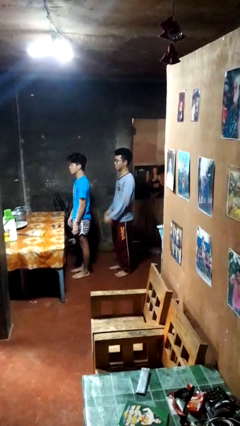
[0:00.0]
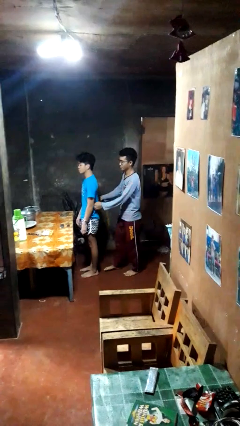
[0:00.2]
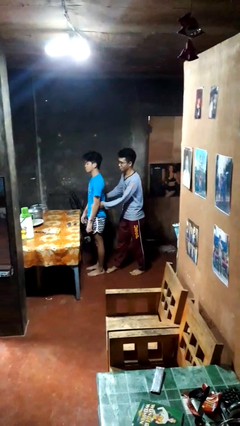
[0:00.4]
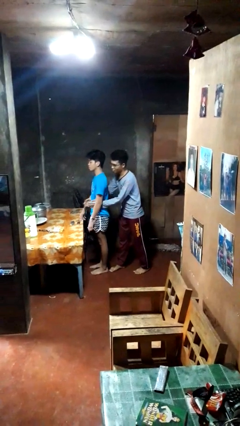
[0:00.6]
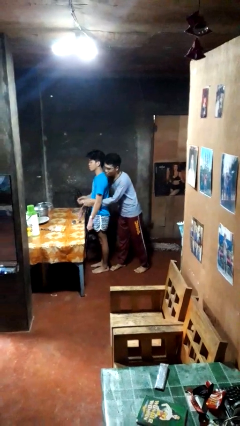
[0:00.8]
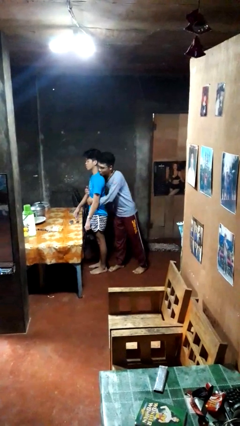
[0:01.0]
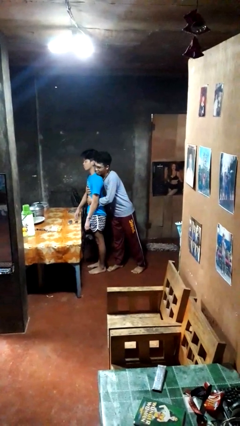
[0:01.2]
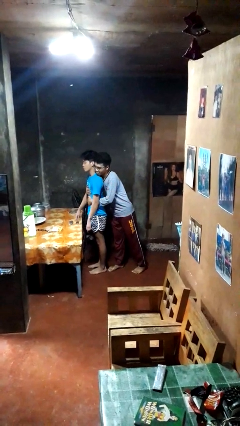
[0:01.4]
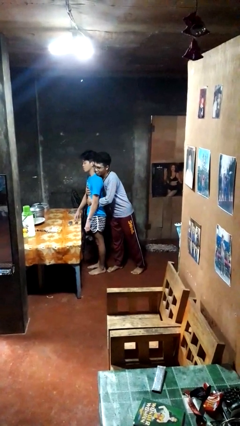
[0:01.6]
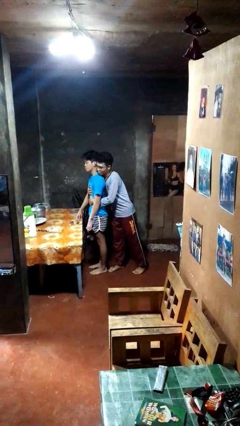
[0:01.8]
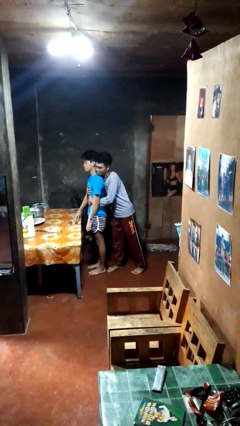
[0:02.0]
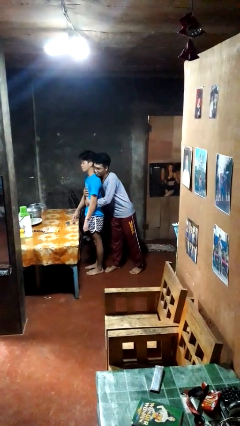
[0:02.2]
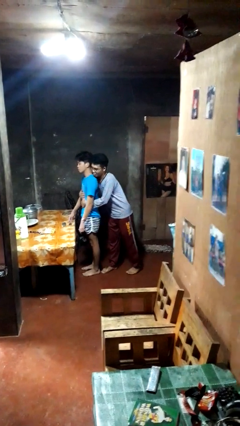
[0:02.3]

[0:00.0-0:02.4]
person hugs person from behind

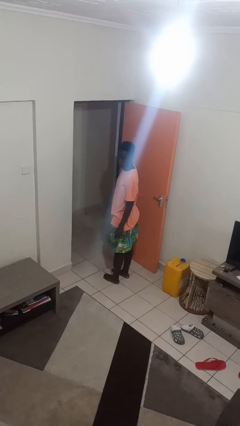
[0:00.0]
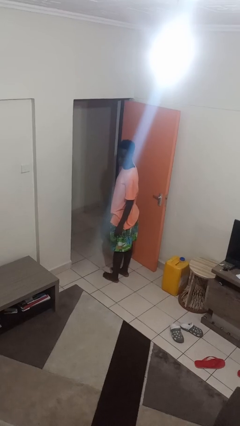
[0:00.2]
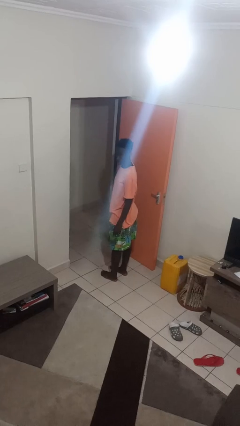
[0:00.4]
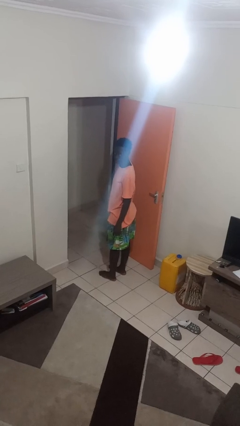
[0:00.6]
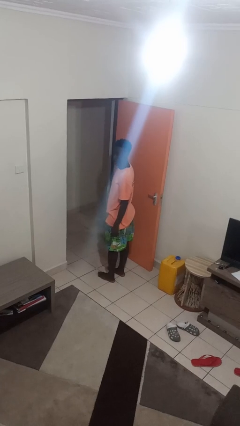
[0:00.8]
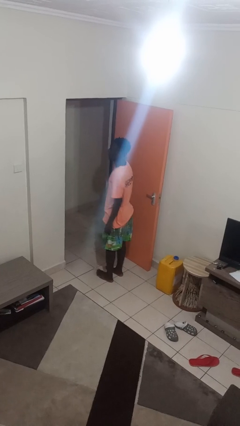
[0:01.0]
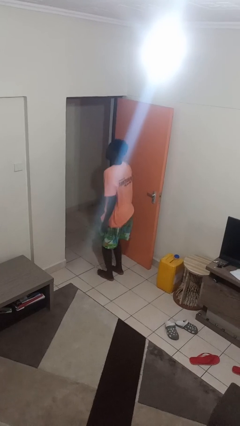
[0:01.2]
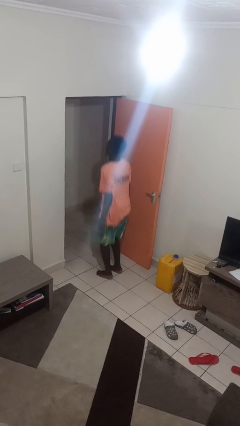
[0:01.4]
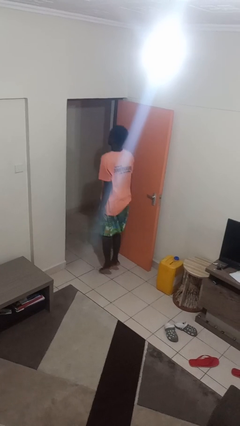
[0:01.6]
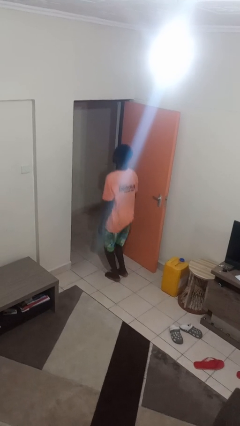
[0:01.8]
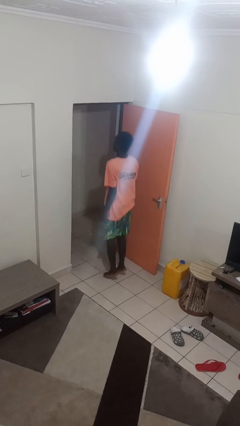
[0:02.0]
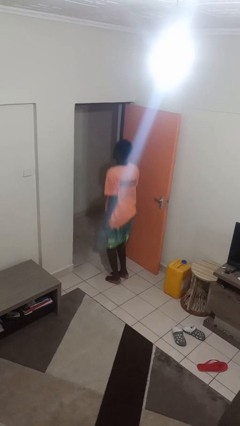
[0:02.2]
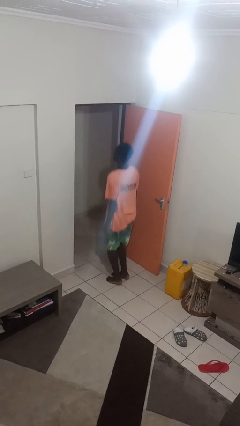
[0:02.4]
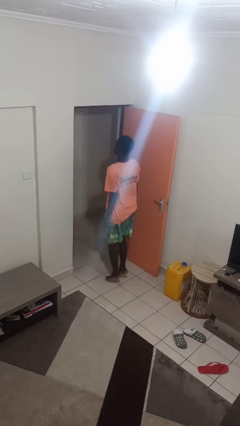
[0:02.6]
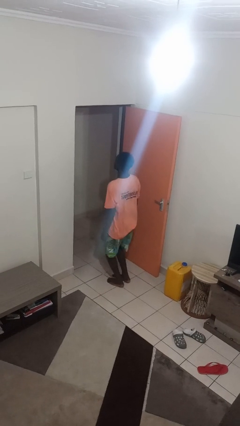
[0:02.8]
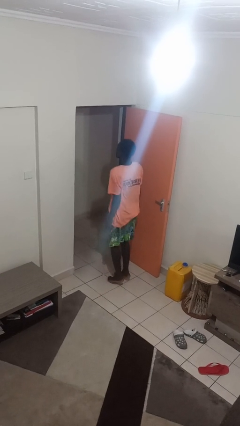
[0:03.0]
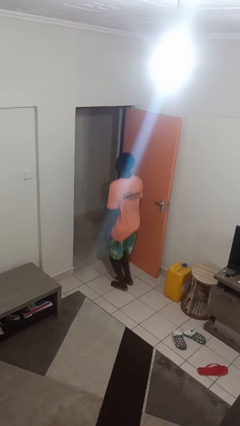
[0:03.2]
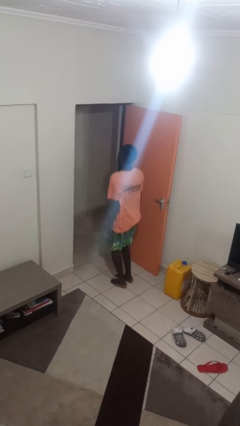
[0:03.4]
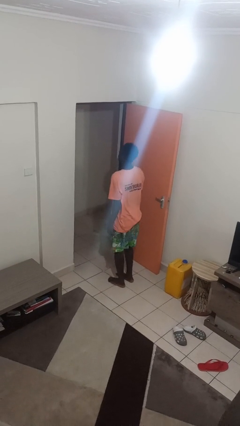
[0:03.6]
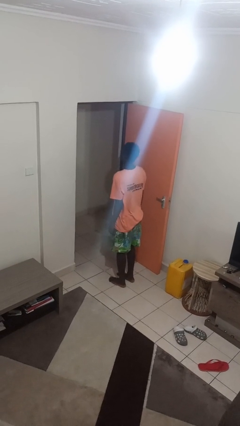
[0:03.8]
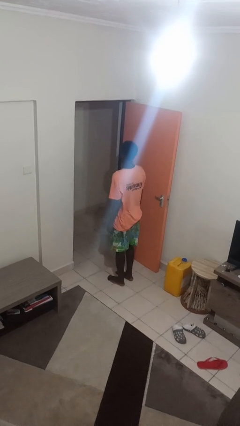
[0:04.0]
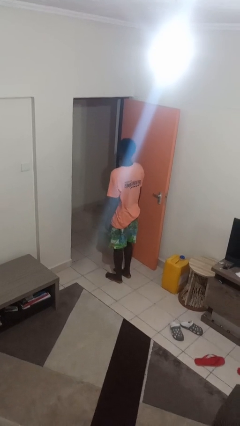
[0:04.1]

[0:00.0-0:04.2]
person jumps

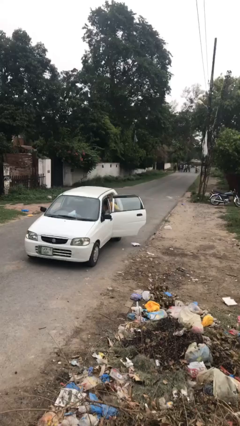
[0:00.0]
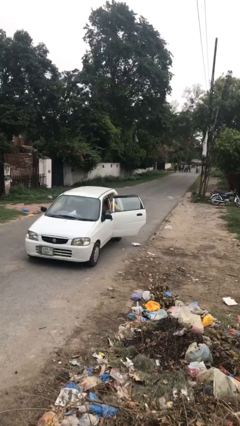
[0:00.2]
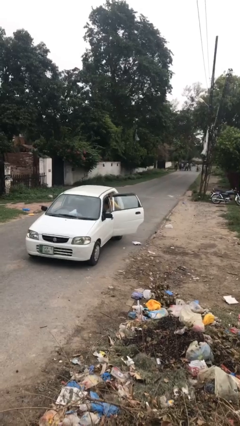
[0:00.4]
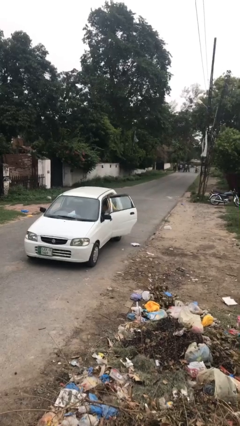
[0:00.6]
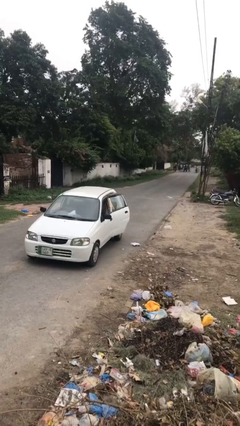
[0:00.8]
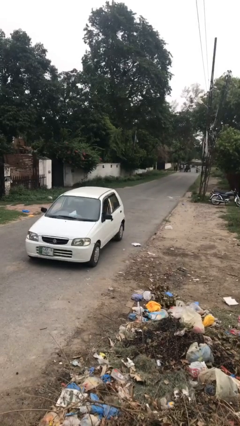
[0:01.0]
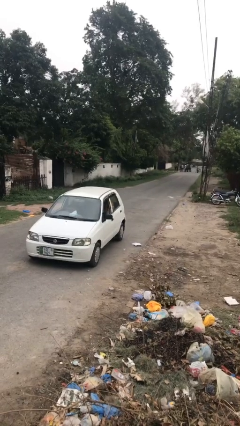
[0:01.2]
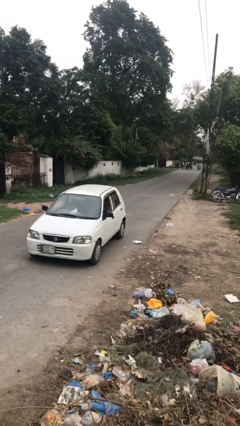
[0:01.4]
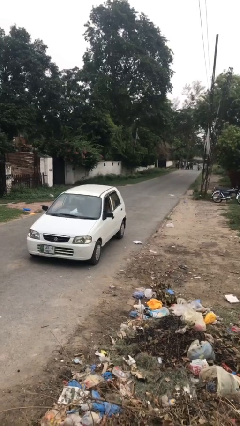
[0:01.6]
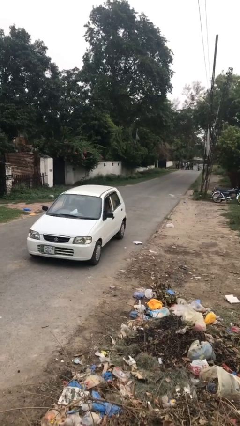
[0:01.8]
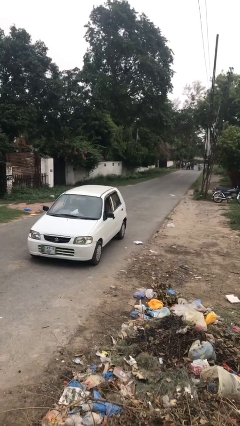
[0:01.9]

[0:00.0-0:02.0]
person closes car door

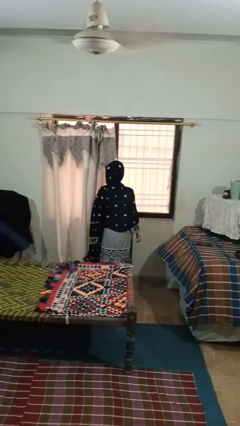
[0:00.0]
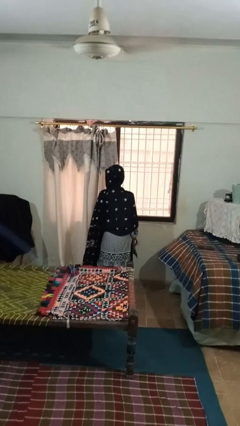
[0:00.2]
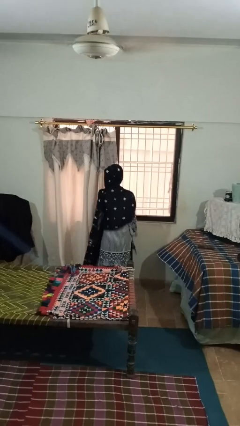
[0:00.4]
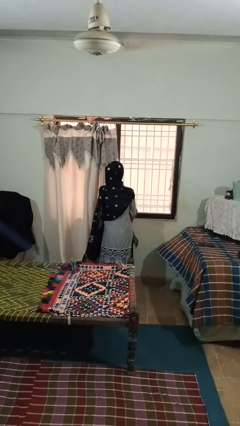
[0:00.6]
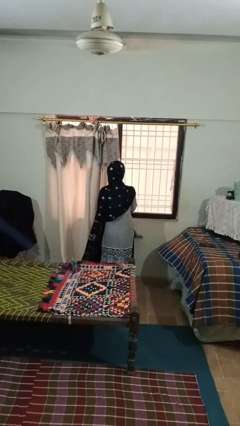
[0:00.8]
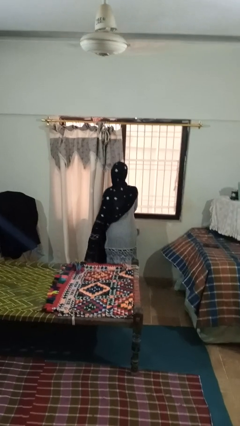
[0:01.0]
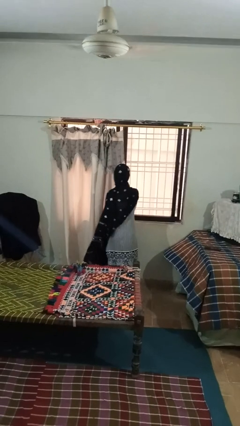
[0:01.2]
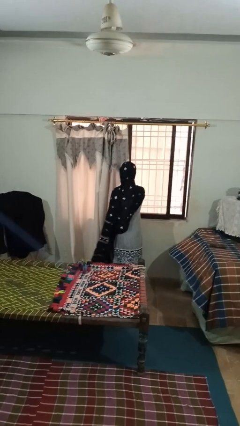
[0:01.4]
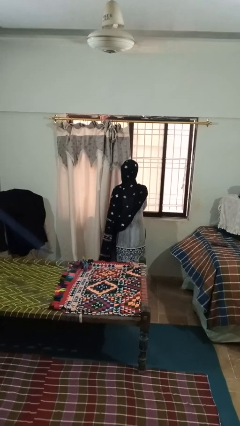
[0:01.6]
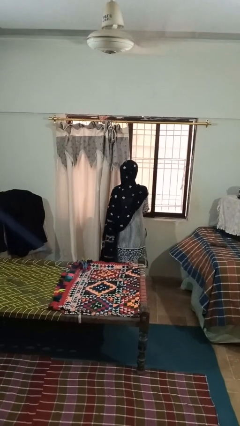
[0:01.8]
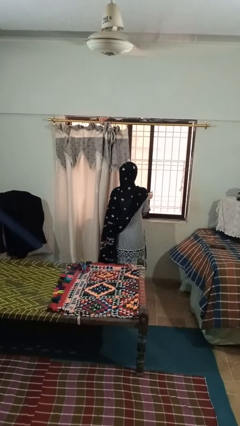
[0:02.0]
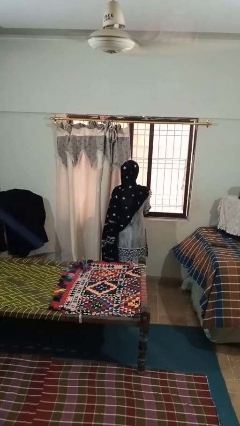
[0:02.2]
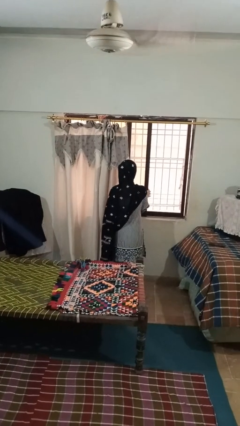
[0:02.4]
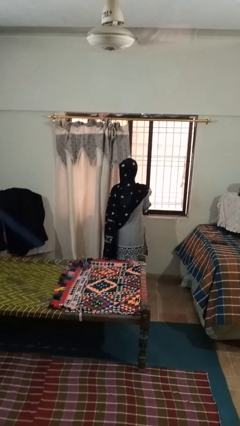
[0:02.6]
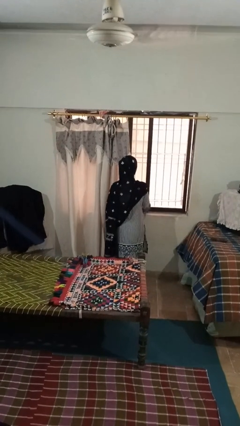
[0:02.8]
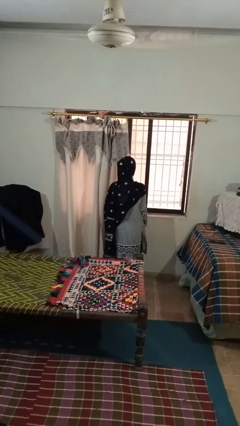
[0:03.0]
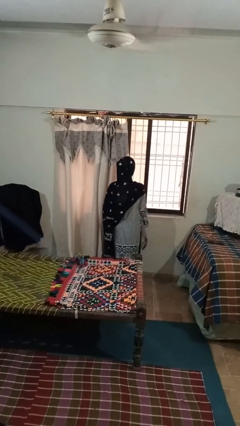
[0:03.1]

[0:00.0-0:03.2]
person opens home window

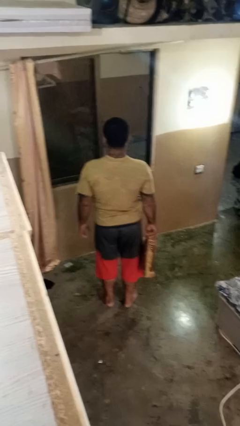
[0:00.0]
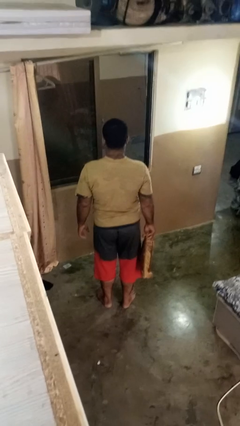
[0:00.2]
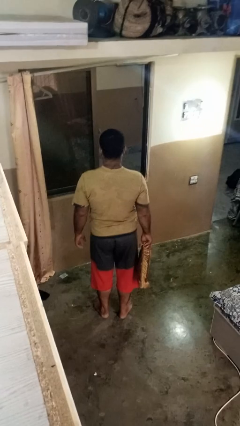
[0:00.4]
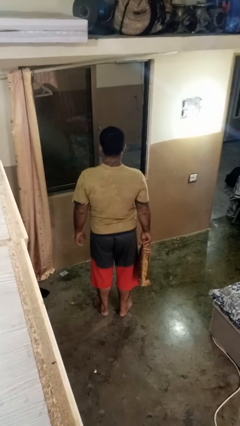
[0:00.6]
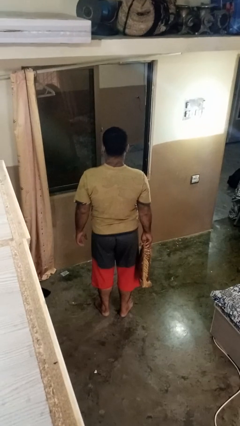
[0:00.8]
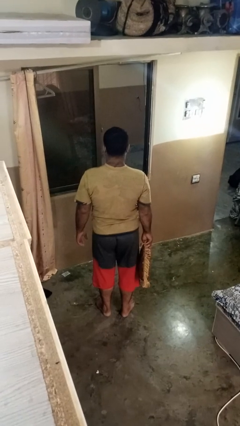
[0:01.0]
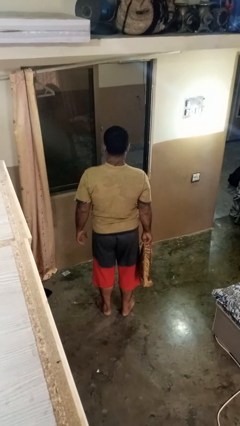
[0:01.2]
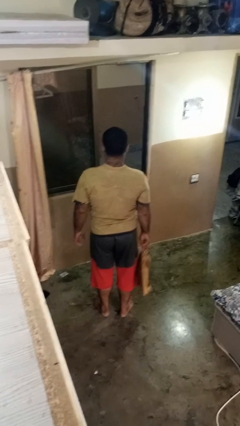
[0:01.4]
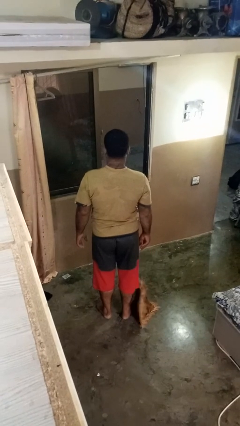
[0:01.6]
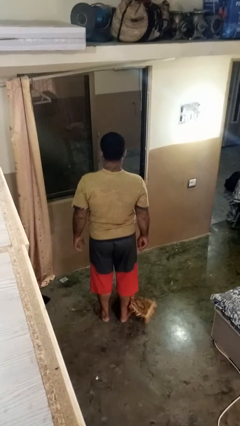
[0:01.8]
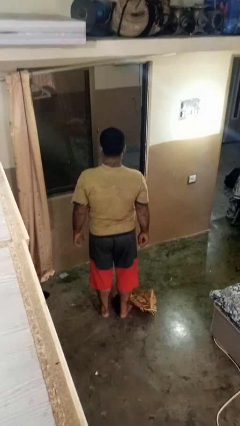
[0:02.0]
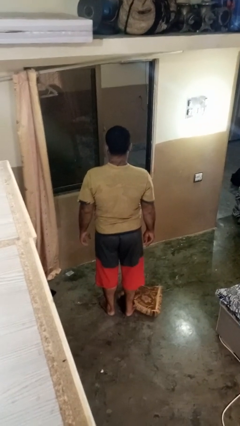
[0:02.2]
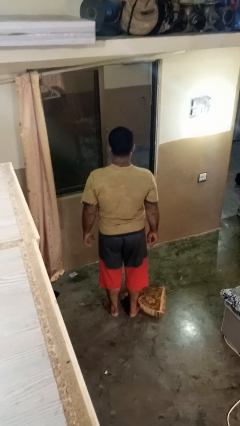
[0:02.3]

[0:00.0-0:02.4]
person drops object

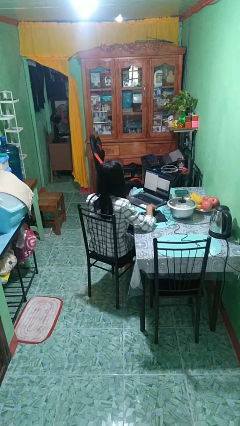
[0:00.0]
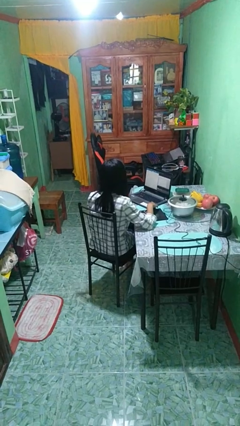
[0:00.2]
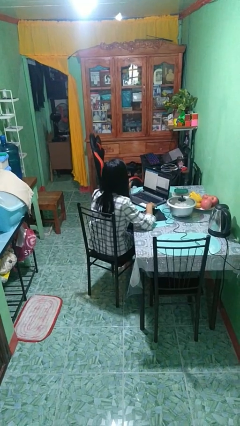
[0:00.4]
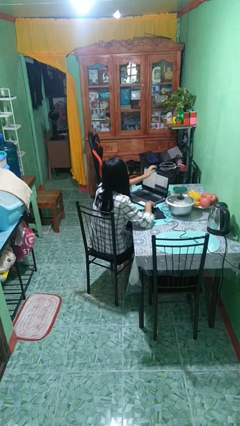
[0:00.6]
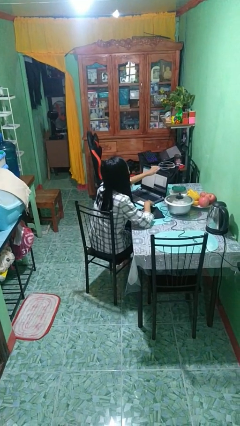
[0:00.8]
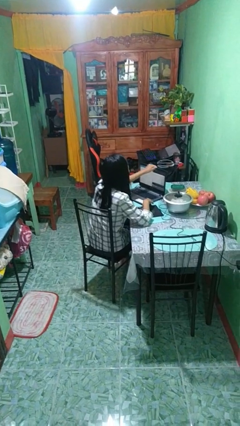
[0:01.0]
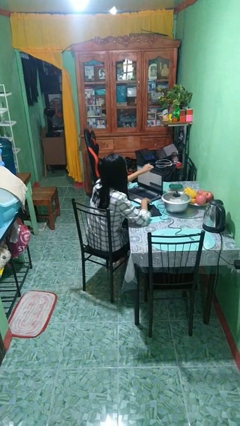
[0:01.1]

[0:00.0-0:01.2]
person closes laptop

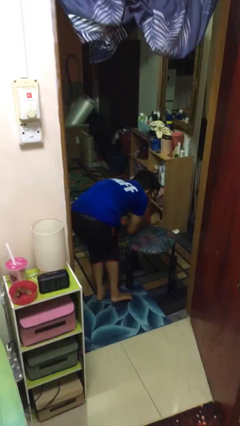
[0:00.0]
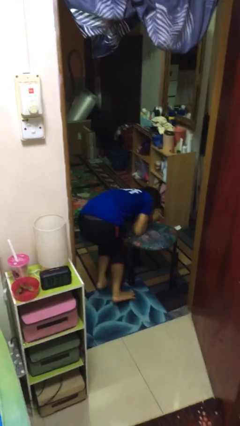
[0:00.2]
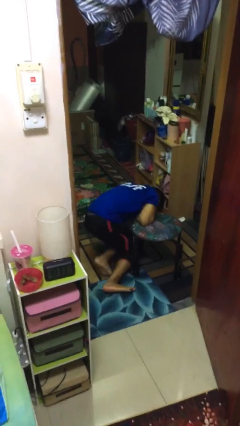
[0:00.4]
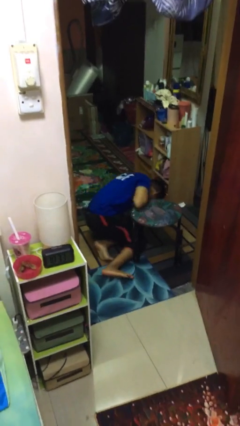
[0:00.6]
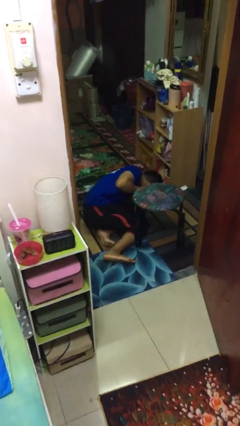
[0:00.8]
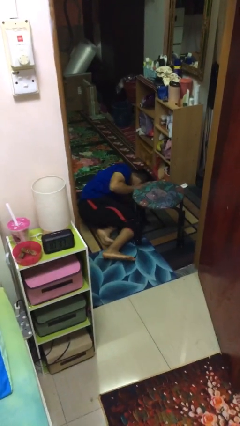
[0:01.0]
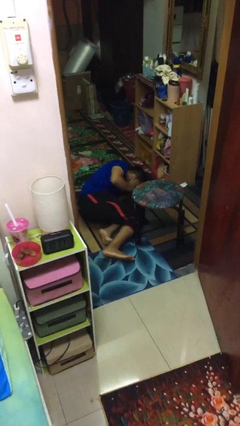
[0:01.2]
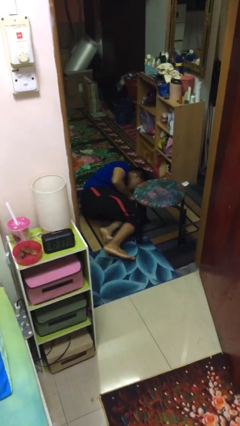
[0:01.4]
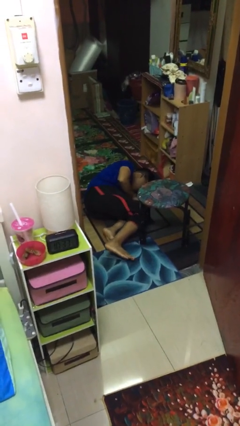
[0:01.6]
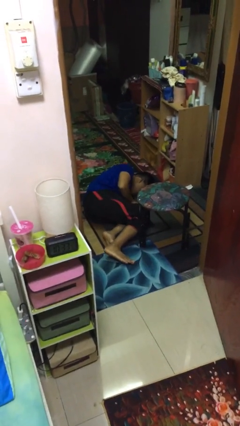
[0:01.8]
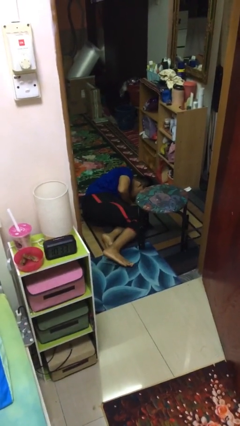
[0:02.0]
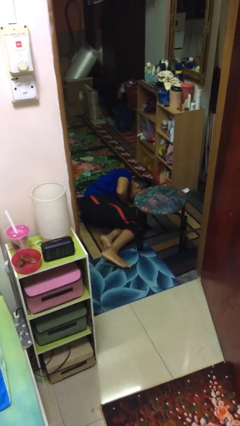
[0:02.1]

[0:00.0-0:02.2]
person lies down on floor
